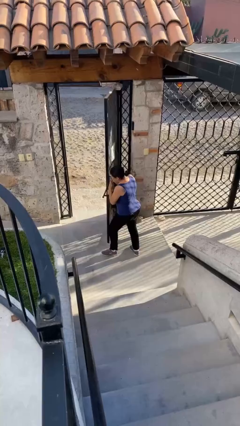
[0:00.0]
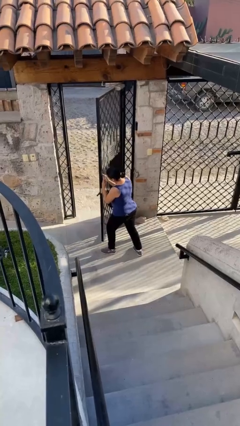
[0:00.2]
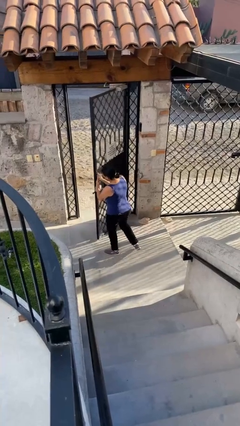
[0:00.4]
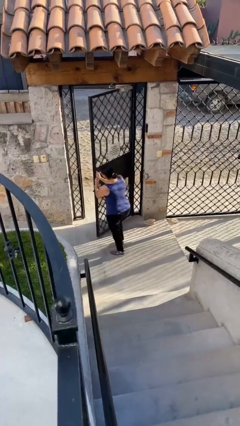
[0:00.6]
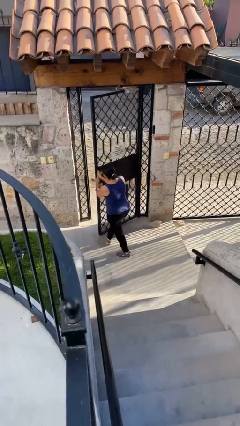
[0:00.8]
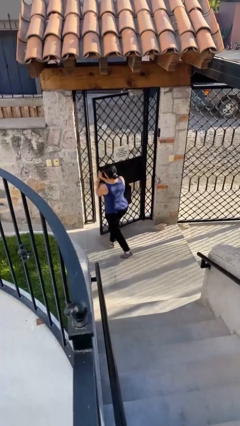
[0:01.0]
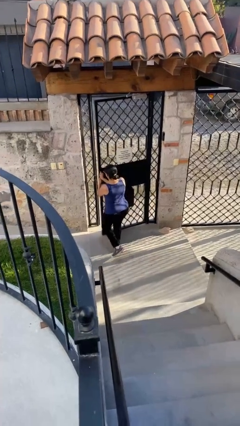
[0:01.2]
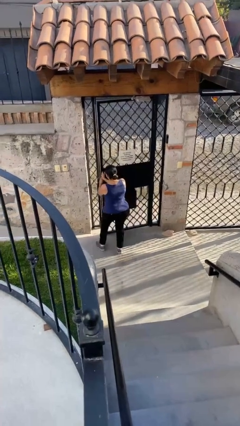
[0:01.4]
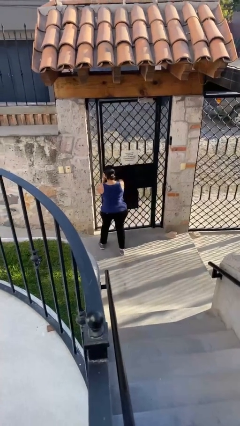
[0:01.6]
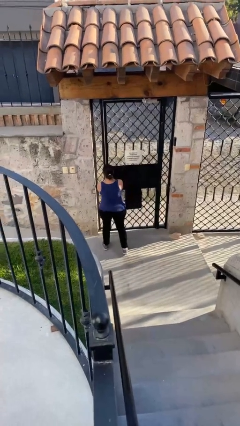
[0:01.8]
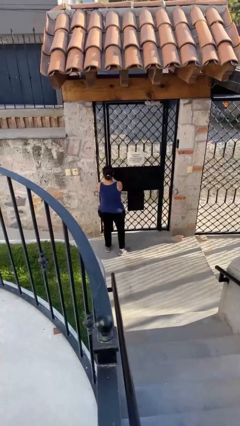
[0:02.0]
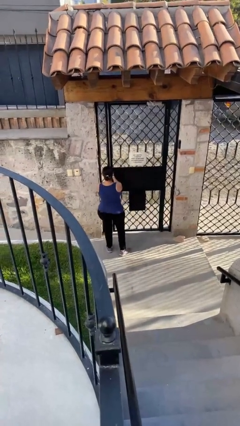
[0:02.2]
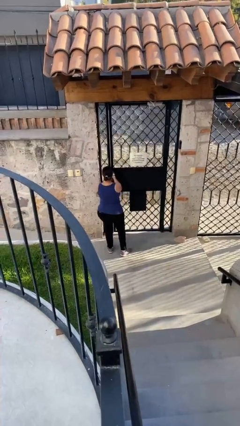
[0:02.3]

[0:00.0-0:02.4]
person closes facility door

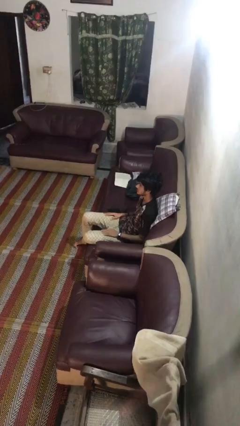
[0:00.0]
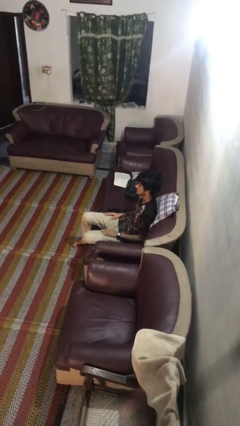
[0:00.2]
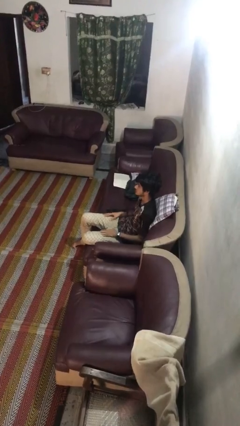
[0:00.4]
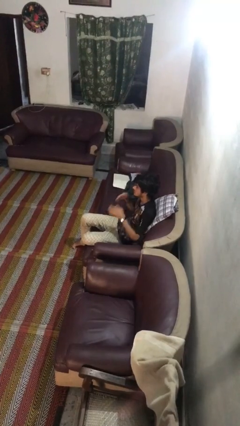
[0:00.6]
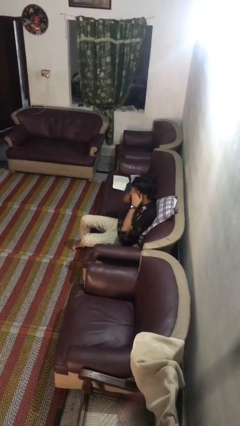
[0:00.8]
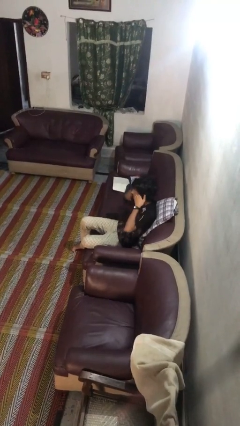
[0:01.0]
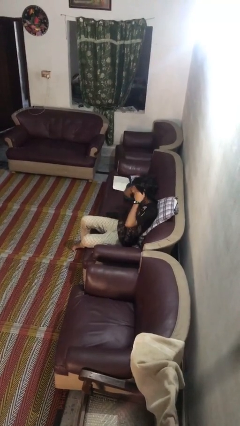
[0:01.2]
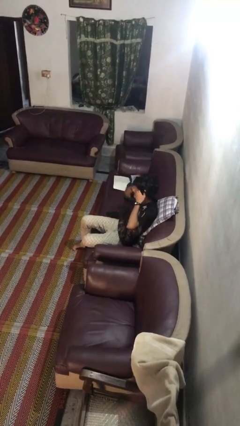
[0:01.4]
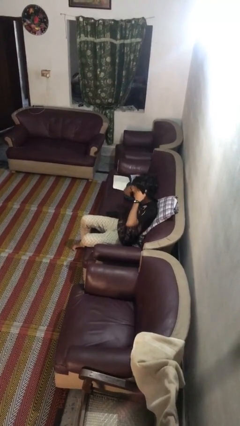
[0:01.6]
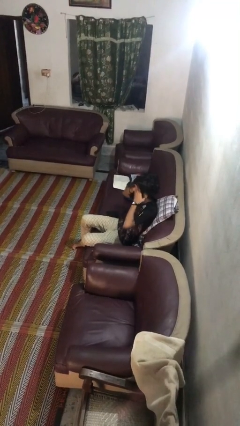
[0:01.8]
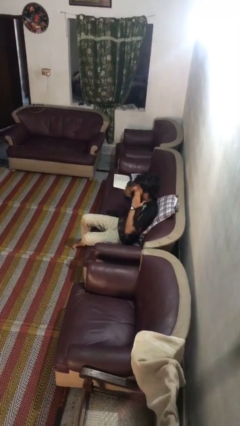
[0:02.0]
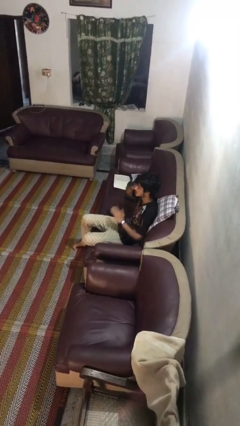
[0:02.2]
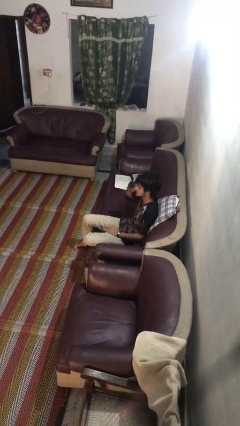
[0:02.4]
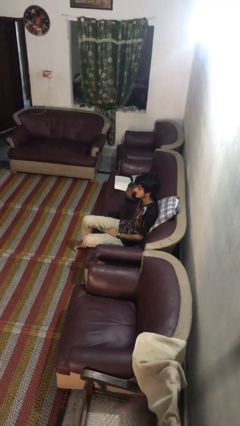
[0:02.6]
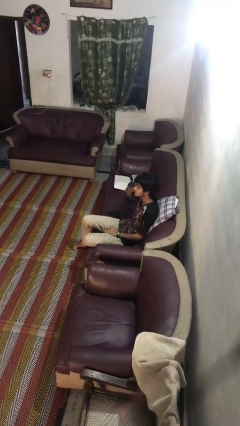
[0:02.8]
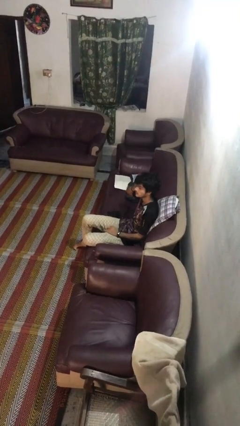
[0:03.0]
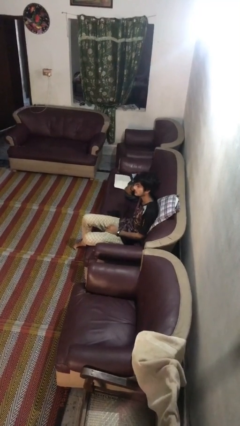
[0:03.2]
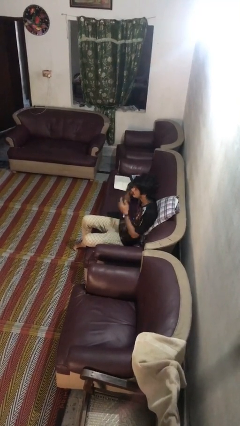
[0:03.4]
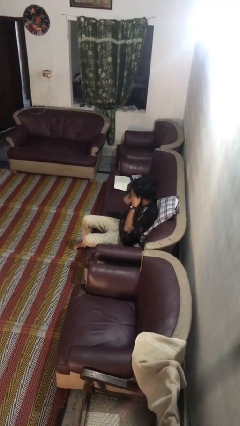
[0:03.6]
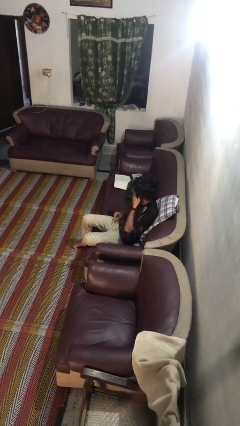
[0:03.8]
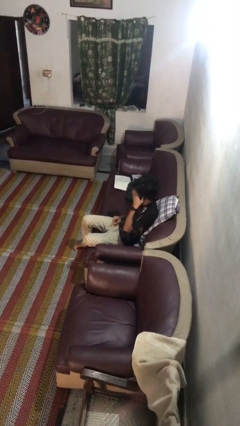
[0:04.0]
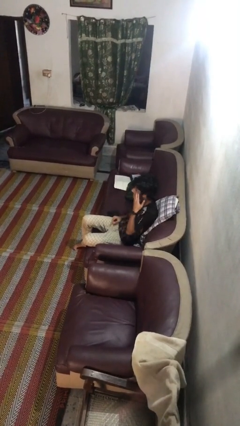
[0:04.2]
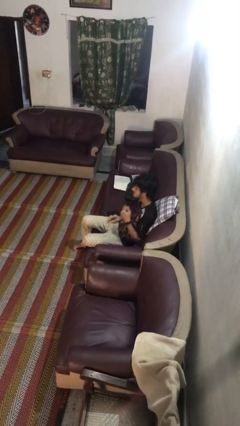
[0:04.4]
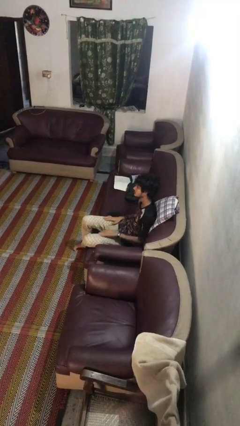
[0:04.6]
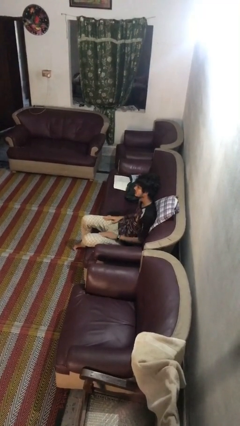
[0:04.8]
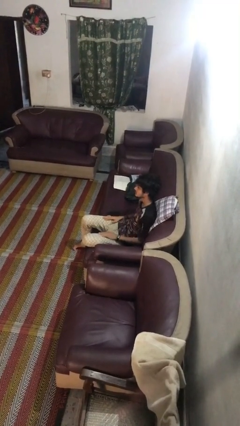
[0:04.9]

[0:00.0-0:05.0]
person rubs eyes

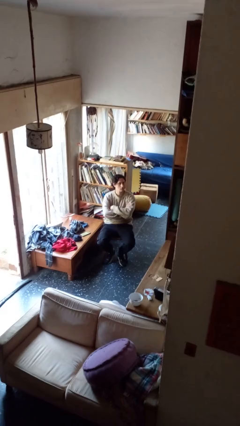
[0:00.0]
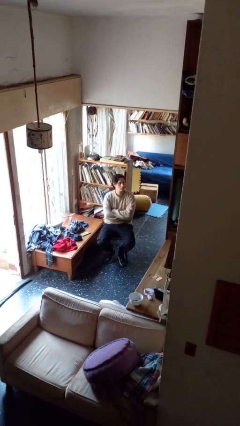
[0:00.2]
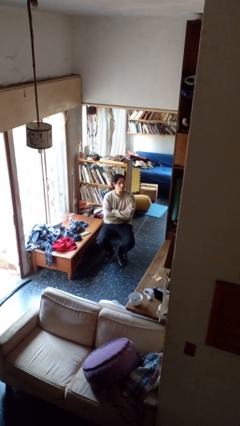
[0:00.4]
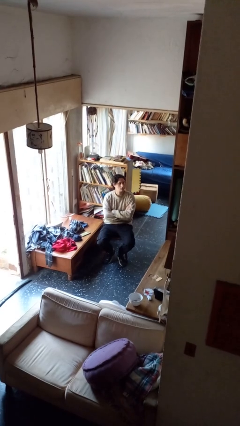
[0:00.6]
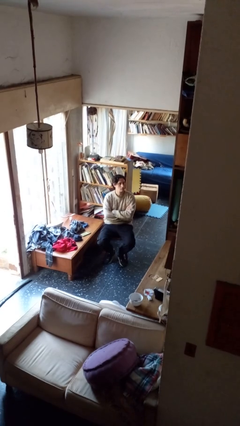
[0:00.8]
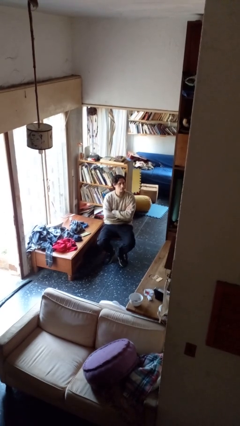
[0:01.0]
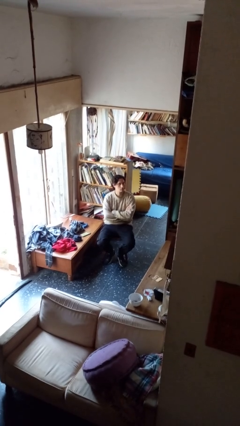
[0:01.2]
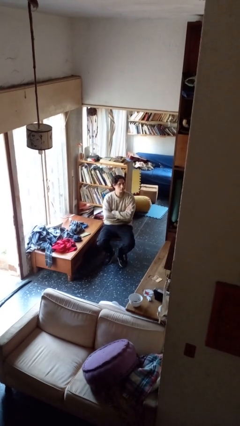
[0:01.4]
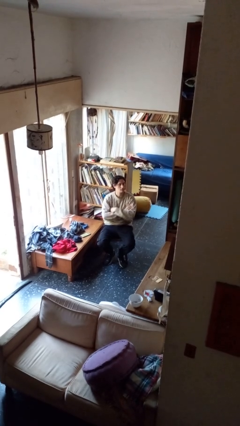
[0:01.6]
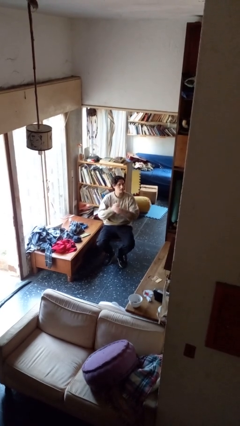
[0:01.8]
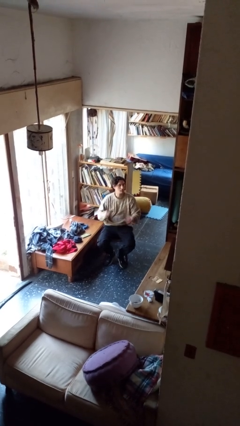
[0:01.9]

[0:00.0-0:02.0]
person crosses arms

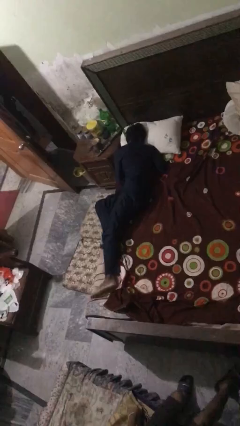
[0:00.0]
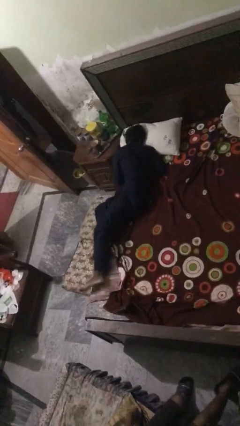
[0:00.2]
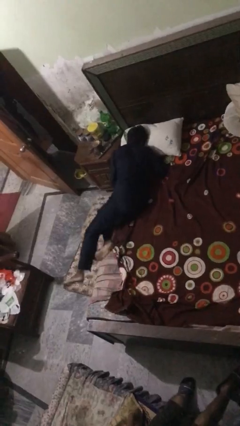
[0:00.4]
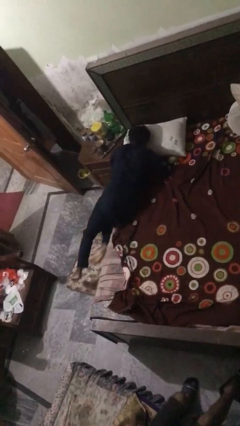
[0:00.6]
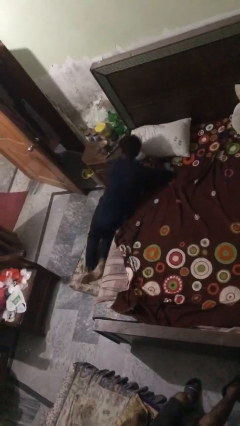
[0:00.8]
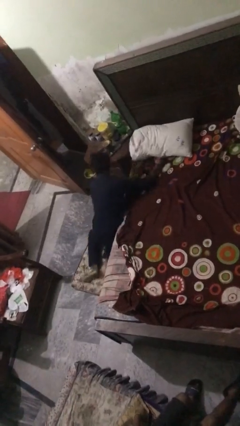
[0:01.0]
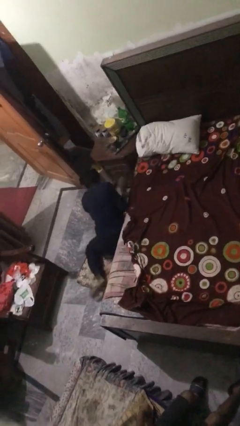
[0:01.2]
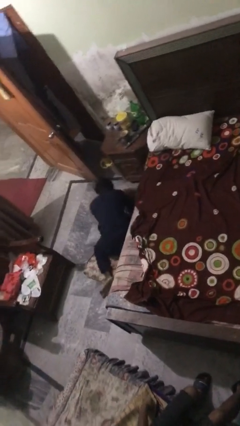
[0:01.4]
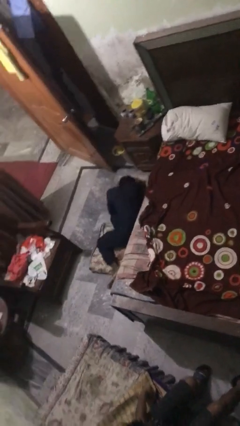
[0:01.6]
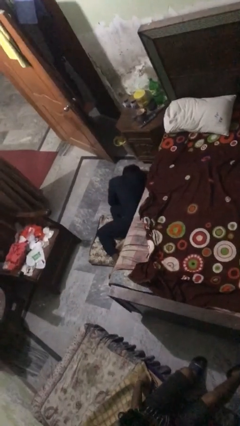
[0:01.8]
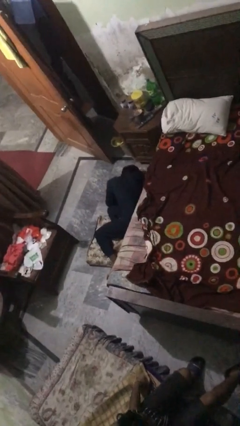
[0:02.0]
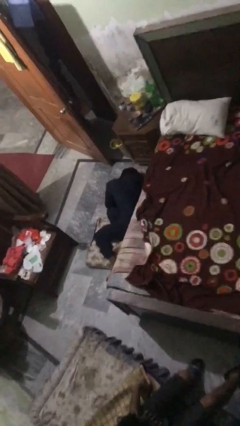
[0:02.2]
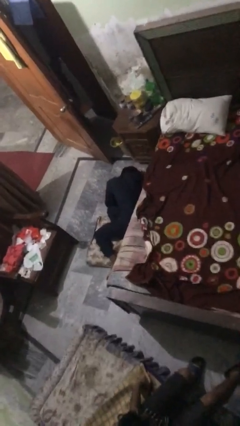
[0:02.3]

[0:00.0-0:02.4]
person falls from bed

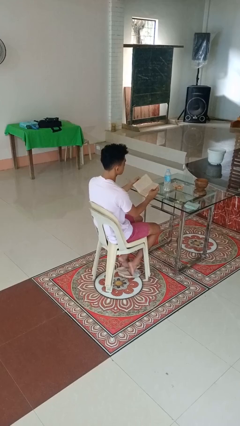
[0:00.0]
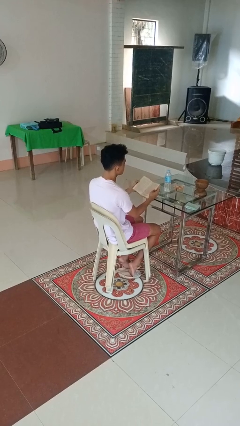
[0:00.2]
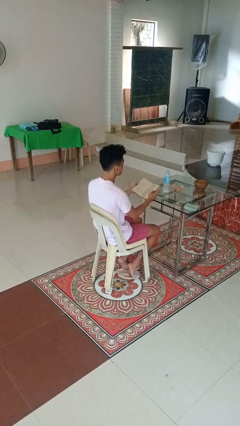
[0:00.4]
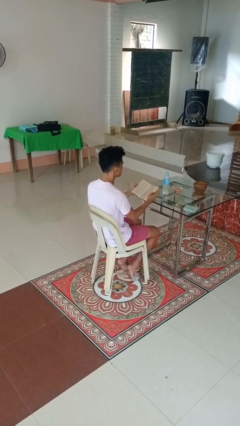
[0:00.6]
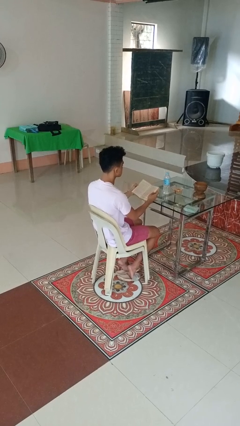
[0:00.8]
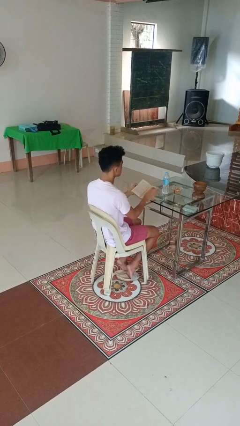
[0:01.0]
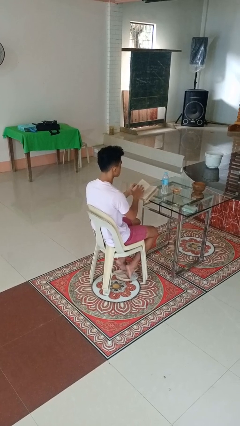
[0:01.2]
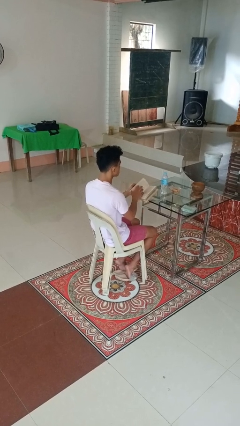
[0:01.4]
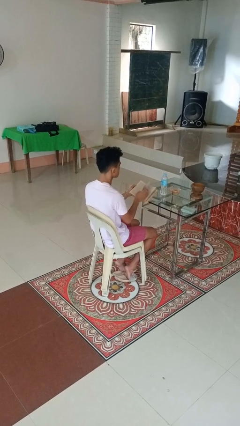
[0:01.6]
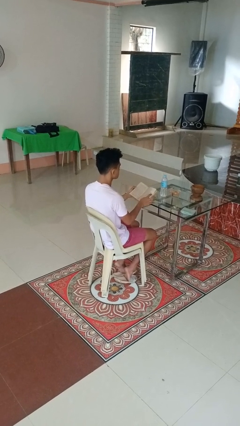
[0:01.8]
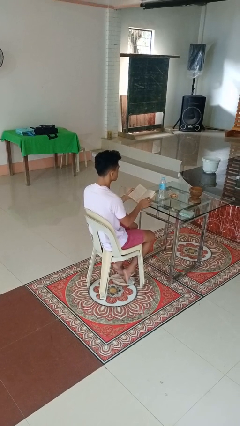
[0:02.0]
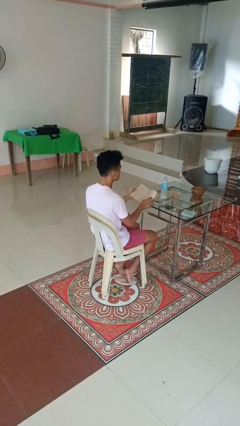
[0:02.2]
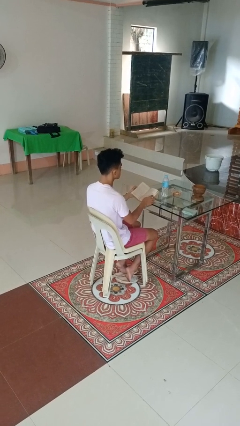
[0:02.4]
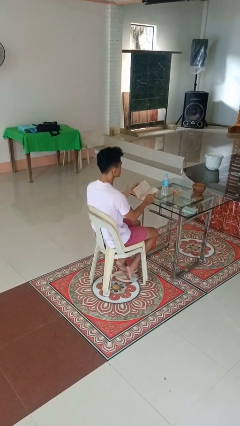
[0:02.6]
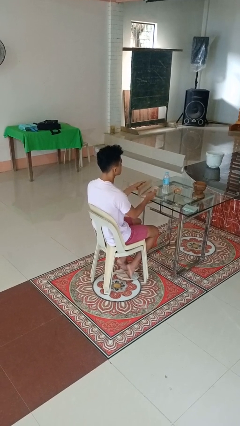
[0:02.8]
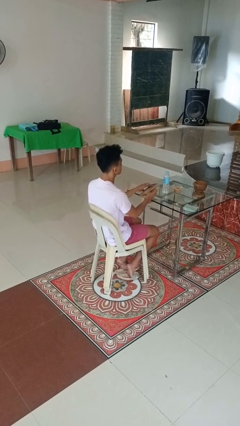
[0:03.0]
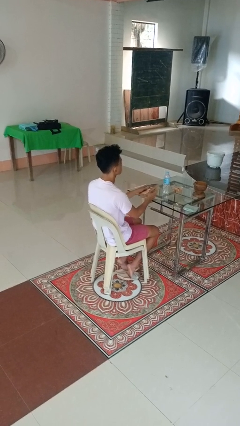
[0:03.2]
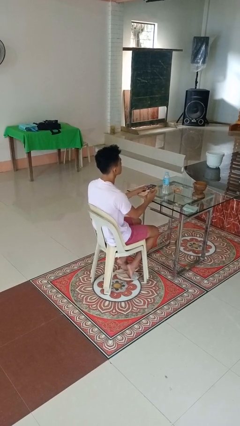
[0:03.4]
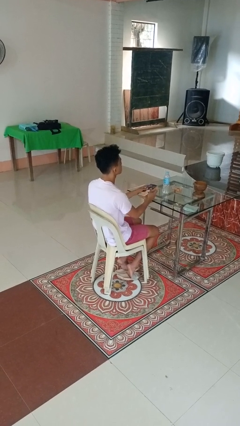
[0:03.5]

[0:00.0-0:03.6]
person reads book

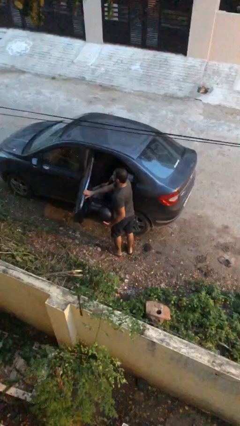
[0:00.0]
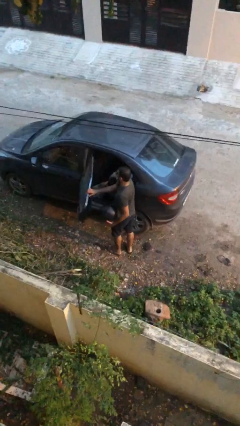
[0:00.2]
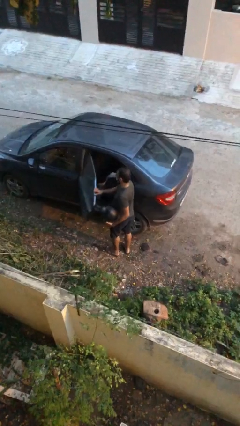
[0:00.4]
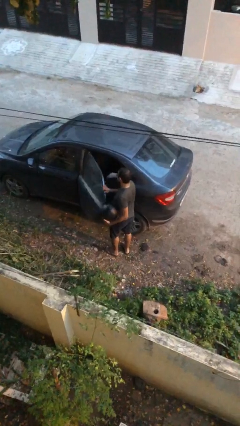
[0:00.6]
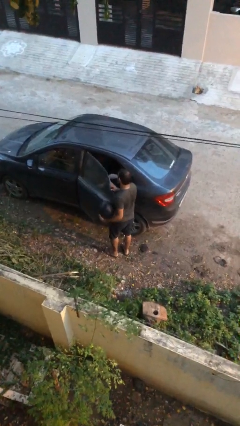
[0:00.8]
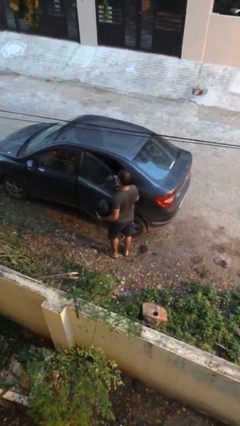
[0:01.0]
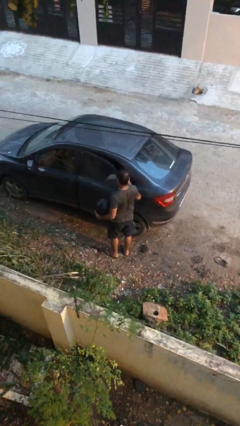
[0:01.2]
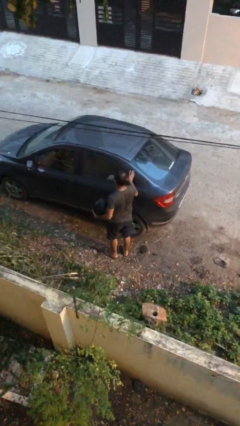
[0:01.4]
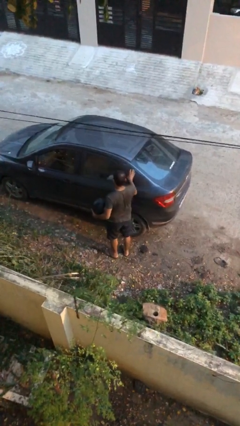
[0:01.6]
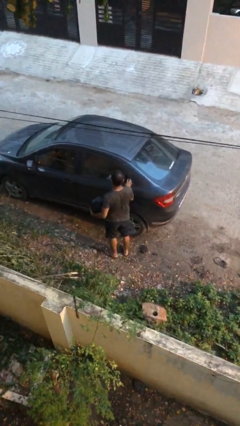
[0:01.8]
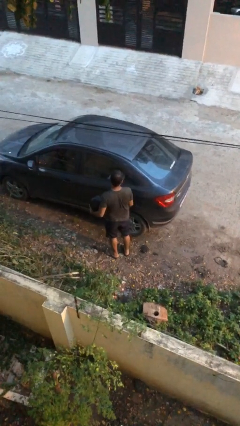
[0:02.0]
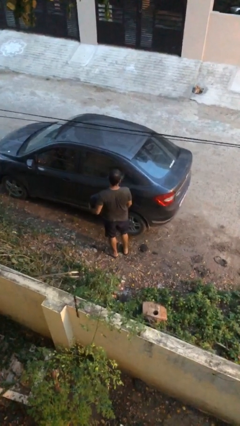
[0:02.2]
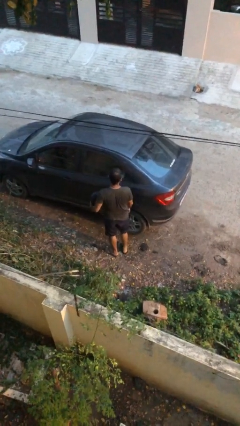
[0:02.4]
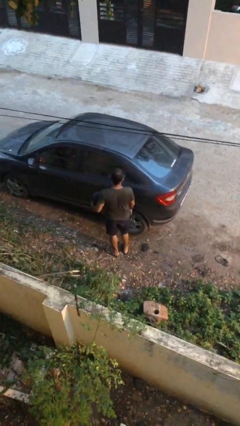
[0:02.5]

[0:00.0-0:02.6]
person closes car door
